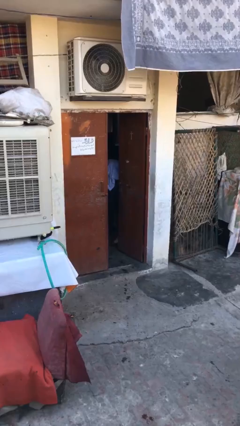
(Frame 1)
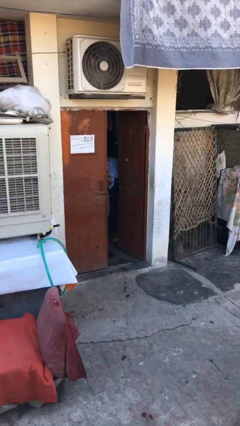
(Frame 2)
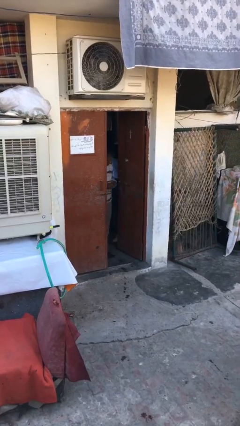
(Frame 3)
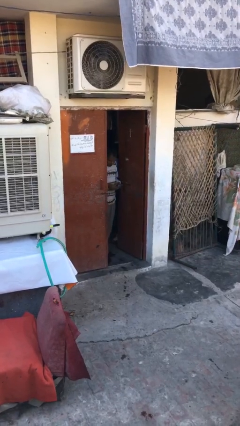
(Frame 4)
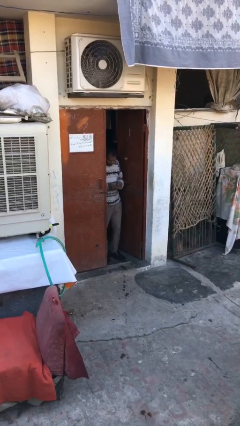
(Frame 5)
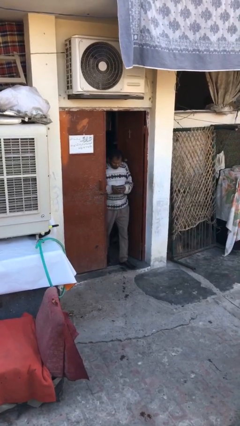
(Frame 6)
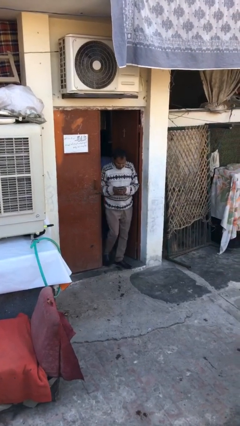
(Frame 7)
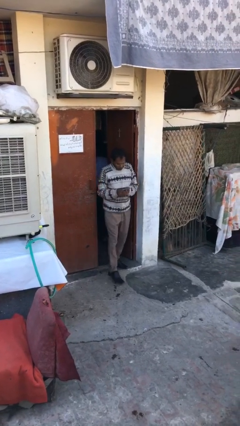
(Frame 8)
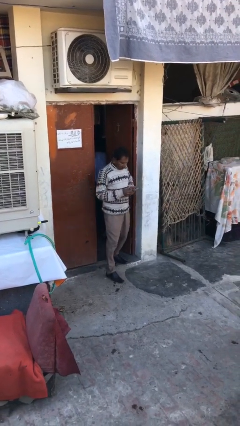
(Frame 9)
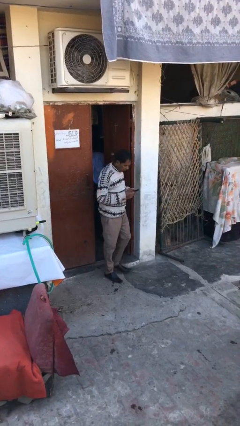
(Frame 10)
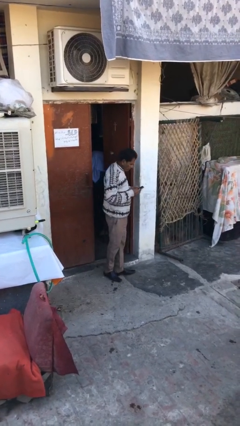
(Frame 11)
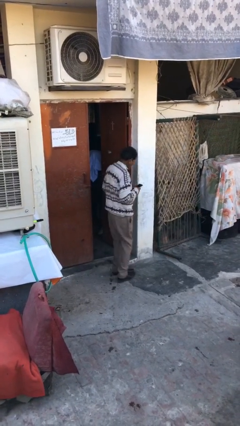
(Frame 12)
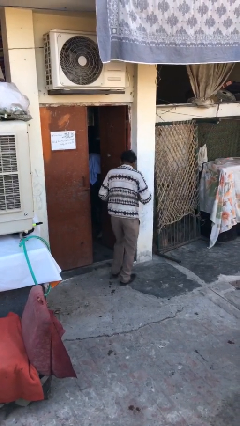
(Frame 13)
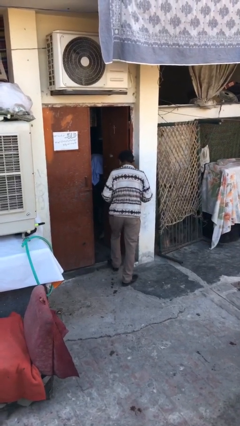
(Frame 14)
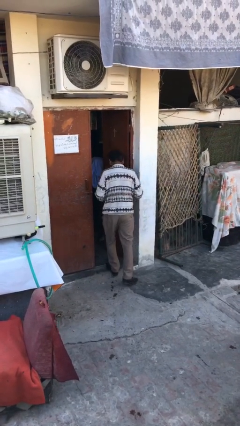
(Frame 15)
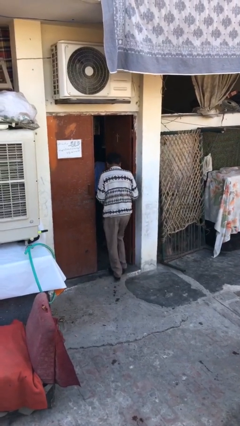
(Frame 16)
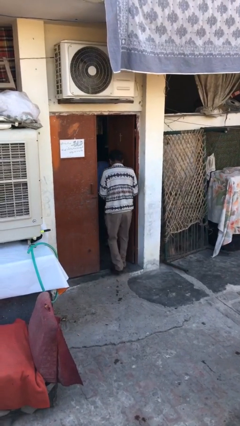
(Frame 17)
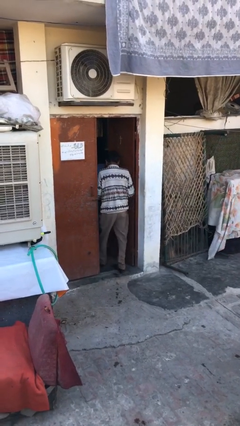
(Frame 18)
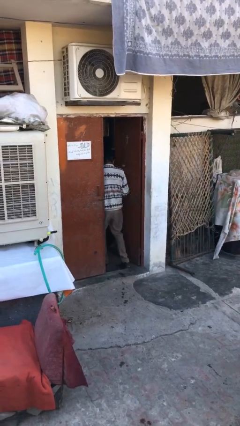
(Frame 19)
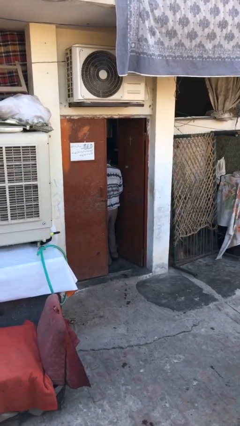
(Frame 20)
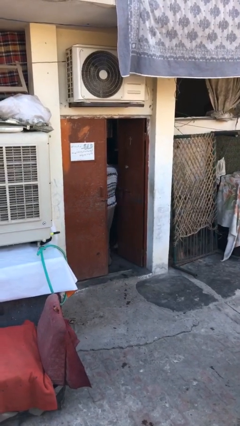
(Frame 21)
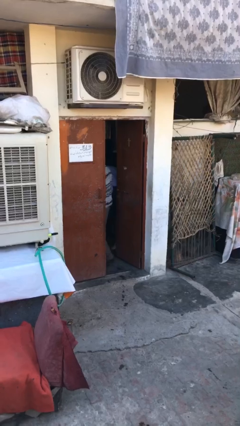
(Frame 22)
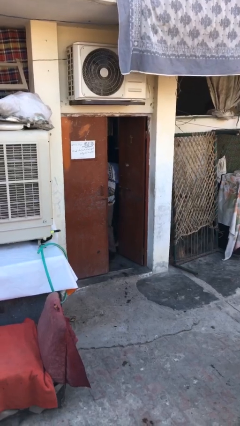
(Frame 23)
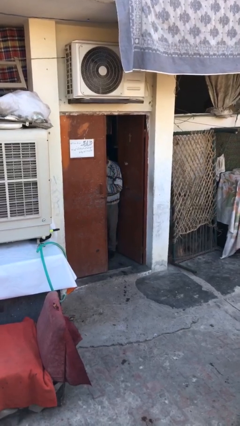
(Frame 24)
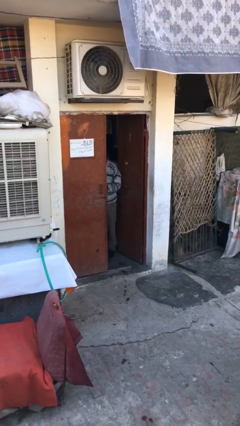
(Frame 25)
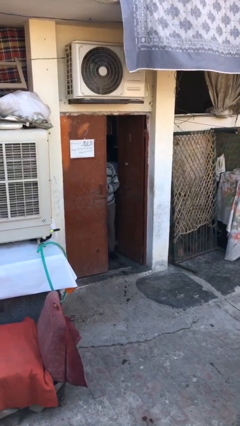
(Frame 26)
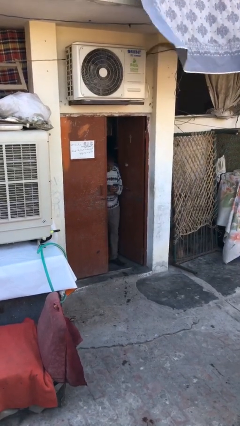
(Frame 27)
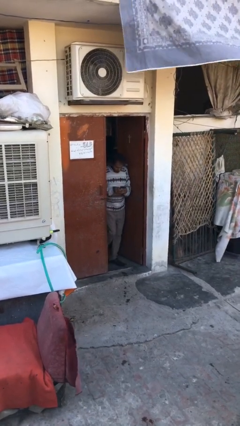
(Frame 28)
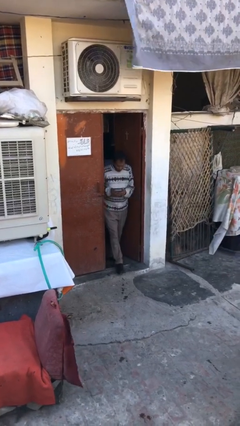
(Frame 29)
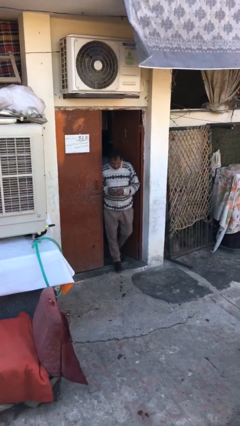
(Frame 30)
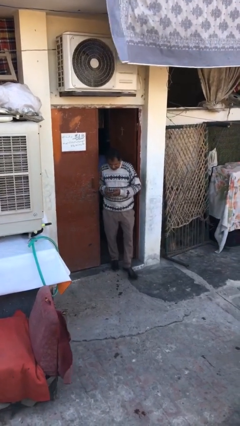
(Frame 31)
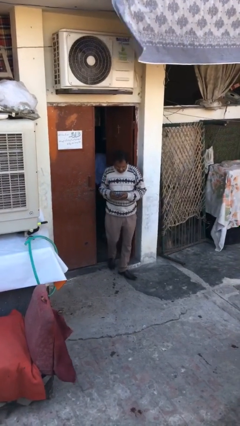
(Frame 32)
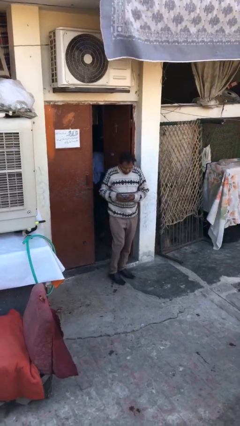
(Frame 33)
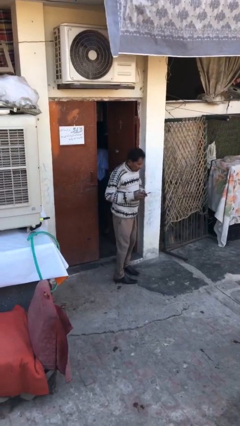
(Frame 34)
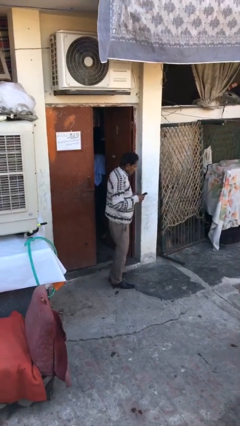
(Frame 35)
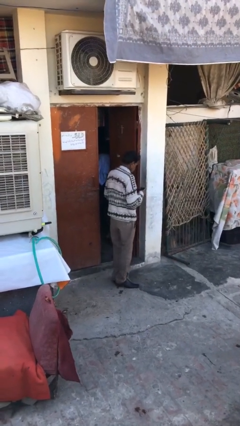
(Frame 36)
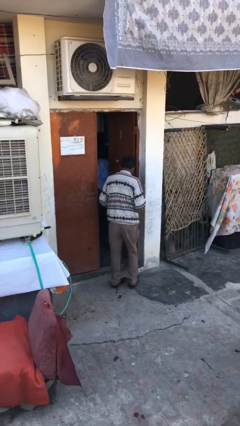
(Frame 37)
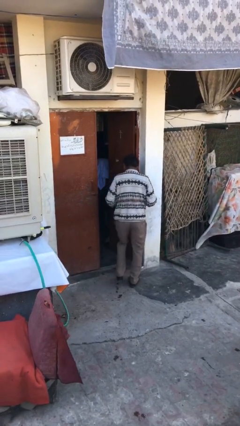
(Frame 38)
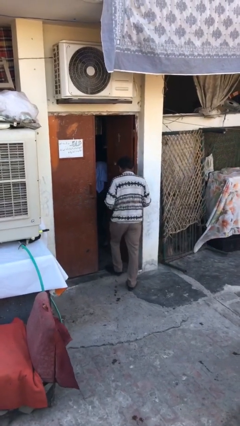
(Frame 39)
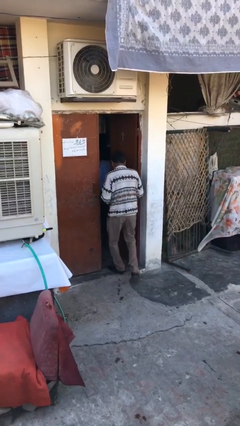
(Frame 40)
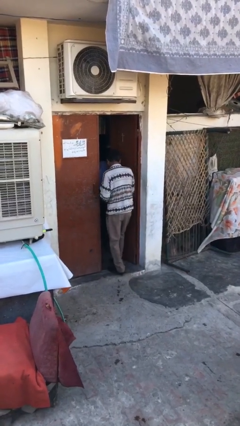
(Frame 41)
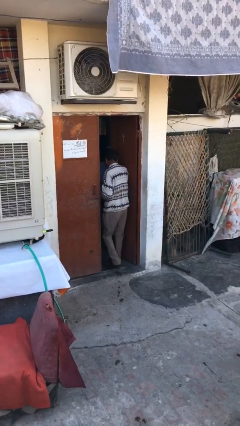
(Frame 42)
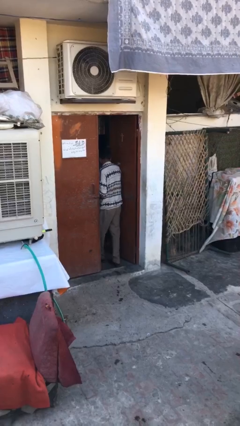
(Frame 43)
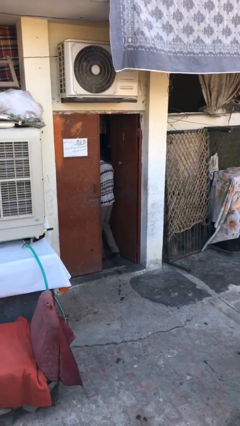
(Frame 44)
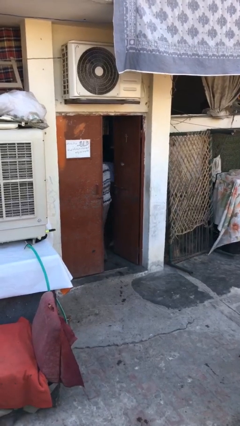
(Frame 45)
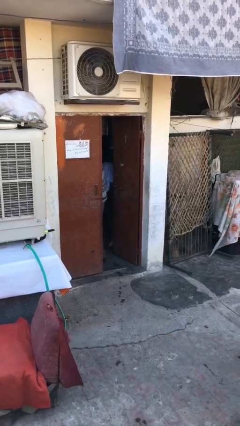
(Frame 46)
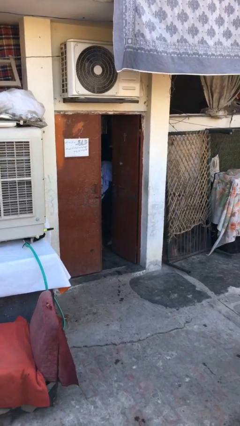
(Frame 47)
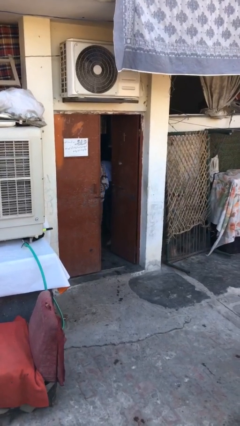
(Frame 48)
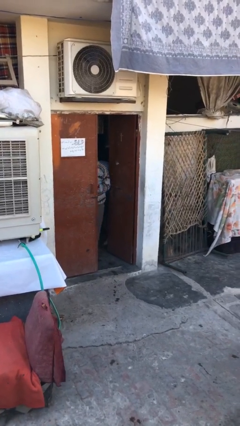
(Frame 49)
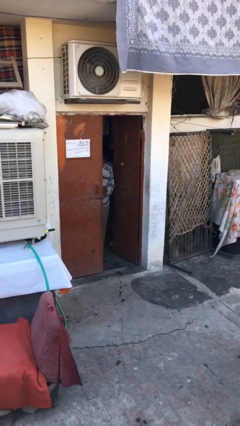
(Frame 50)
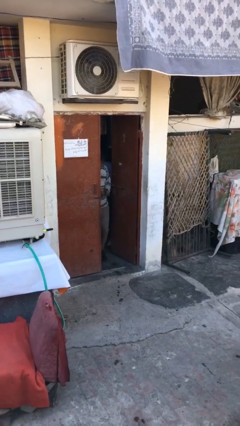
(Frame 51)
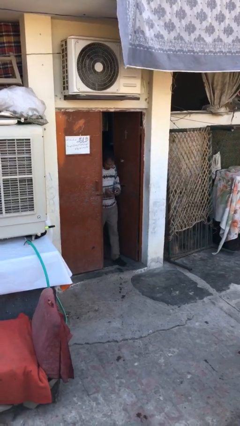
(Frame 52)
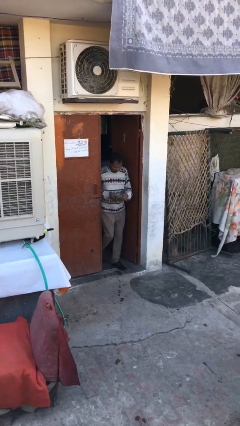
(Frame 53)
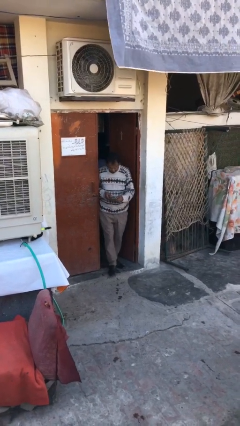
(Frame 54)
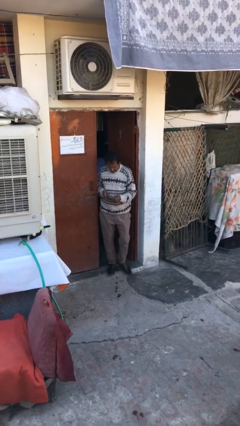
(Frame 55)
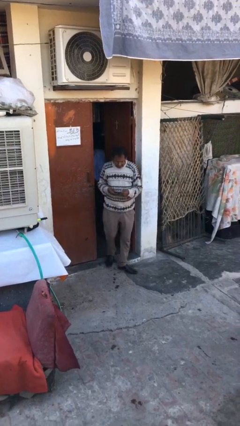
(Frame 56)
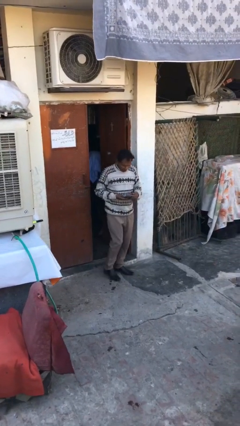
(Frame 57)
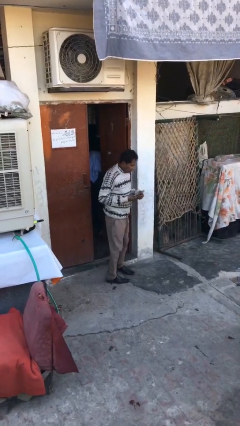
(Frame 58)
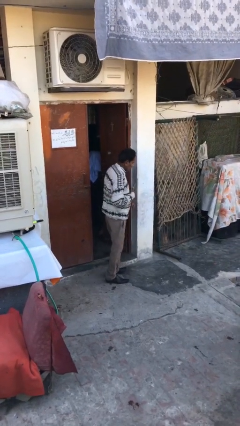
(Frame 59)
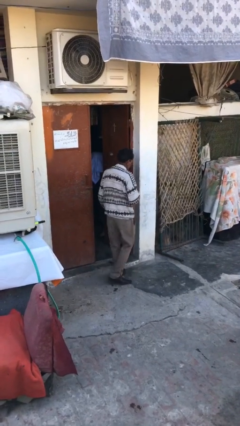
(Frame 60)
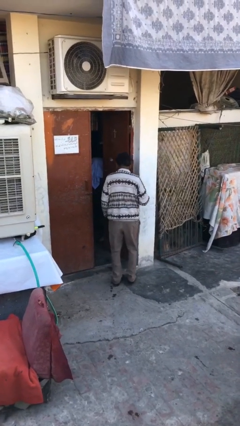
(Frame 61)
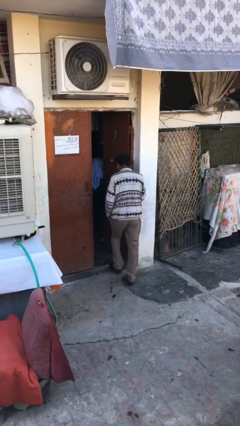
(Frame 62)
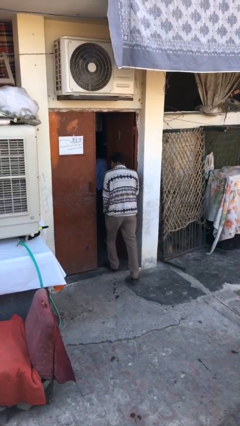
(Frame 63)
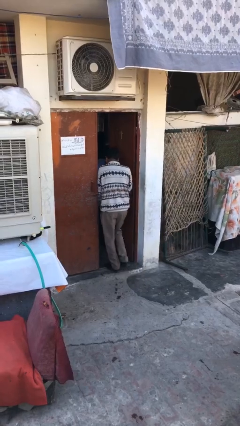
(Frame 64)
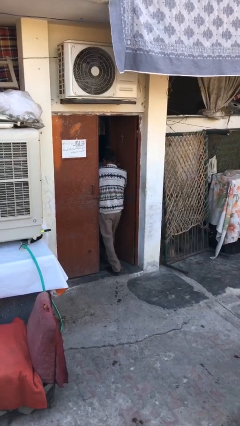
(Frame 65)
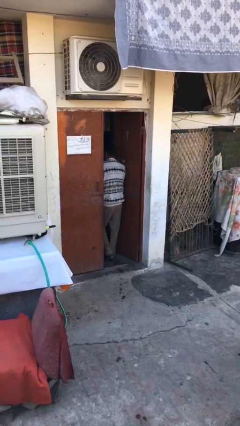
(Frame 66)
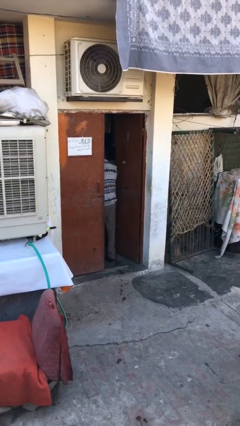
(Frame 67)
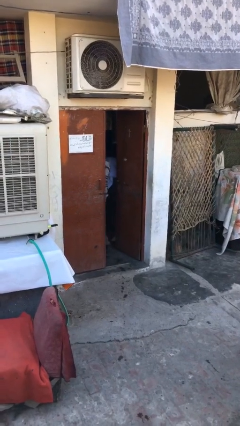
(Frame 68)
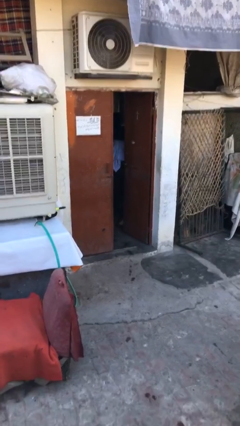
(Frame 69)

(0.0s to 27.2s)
person texts on phone
